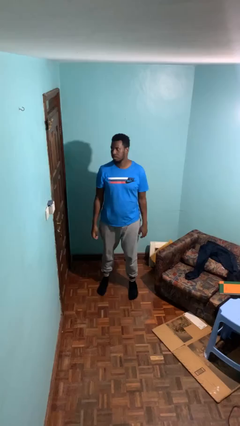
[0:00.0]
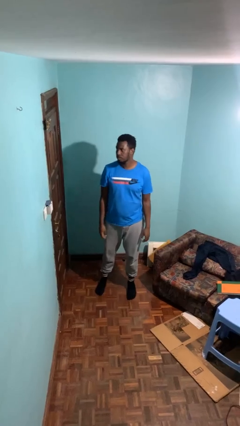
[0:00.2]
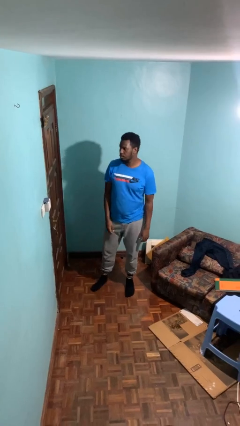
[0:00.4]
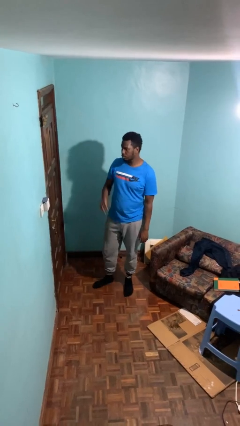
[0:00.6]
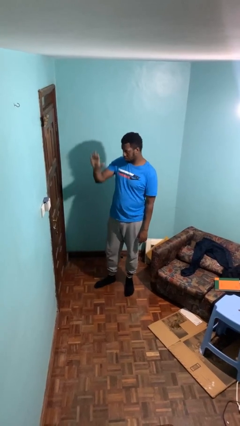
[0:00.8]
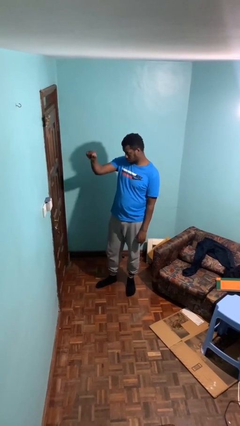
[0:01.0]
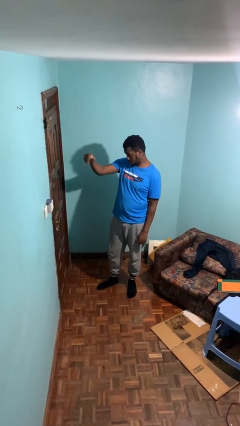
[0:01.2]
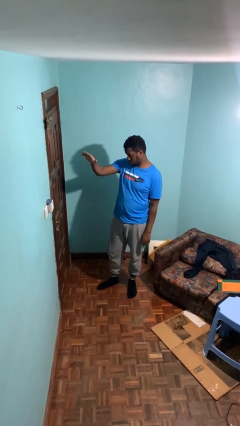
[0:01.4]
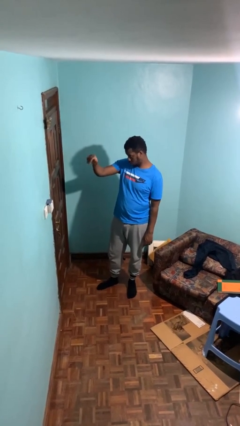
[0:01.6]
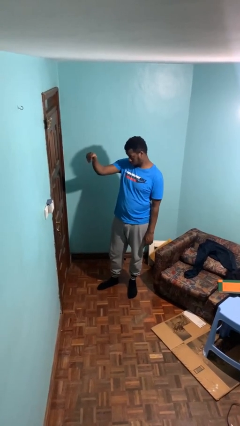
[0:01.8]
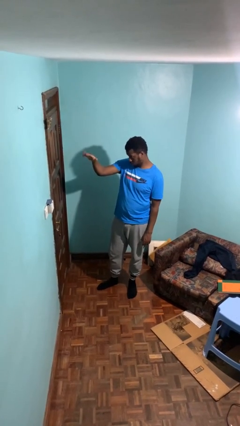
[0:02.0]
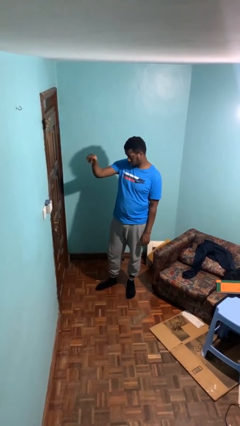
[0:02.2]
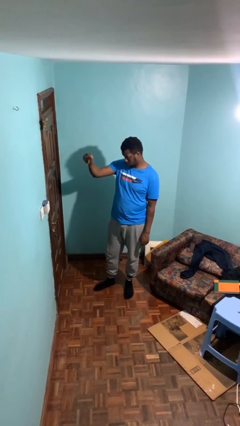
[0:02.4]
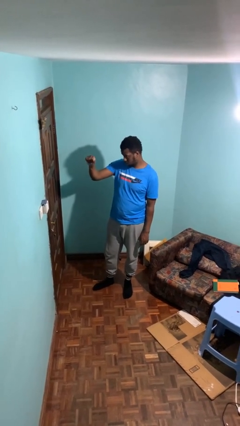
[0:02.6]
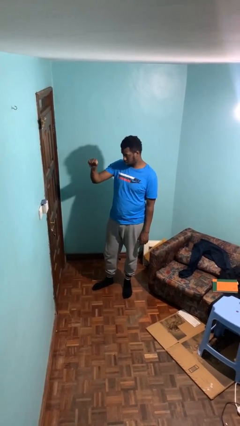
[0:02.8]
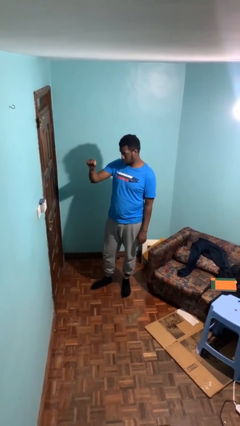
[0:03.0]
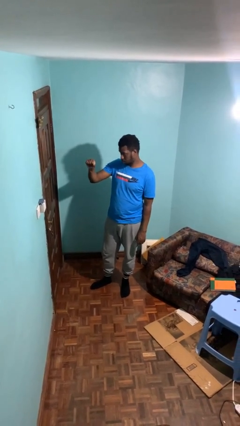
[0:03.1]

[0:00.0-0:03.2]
person gestures come here

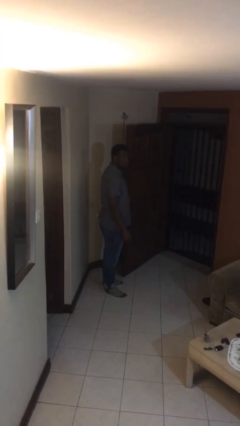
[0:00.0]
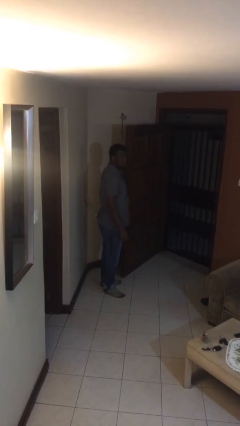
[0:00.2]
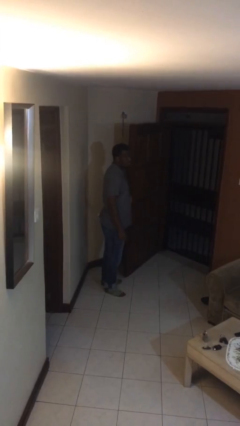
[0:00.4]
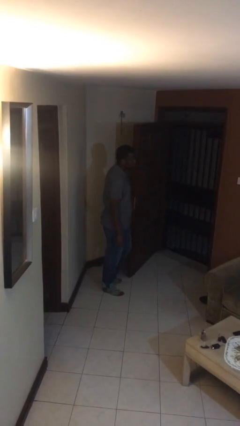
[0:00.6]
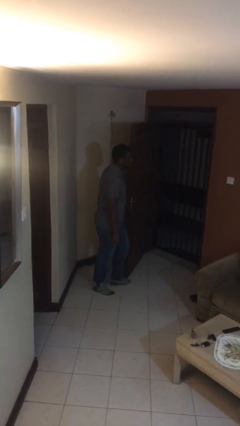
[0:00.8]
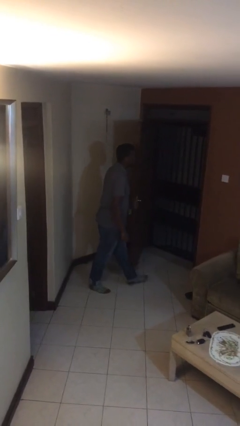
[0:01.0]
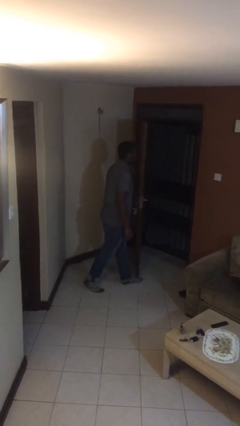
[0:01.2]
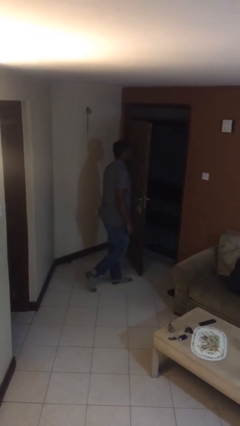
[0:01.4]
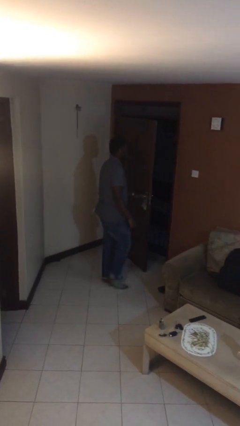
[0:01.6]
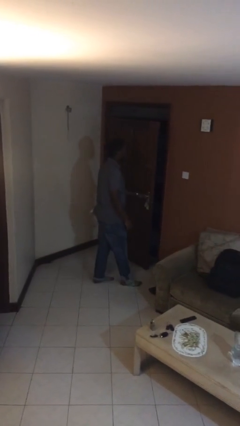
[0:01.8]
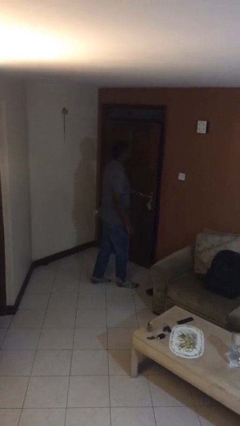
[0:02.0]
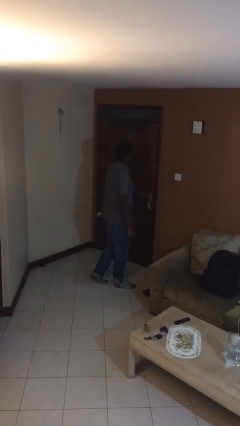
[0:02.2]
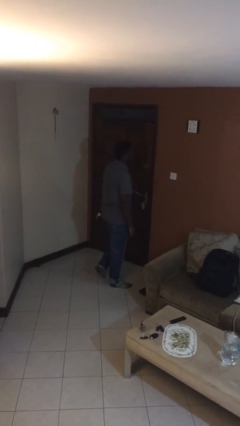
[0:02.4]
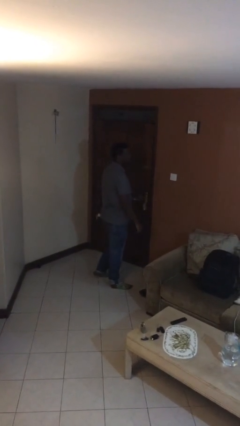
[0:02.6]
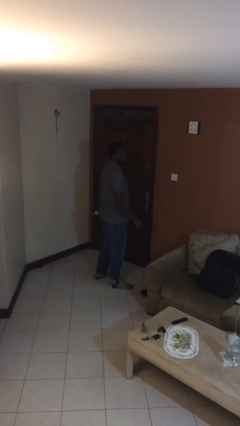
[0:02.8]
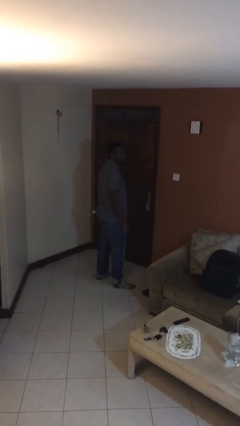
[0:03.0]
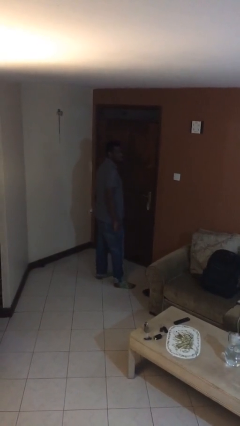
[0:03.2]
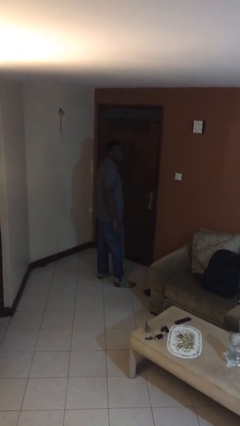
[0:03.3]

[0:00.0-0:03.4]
person closes facility door

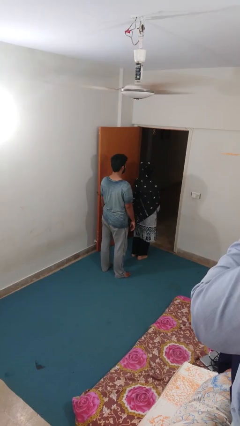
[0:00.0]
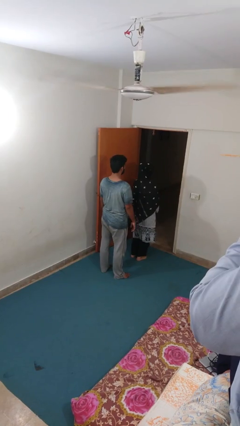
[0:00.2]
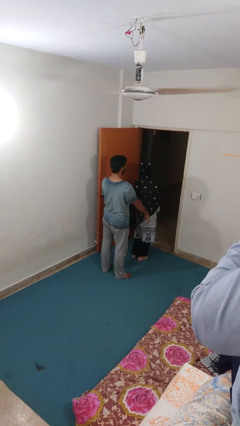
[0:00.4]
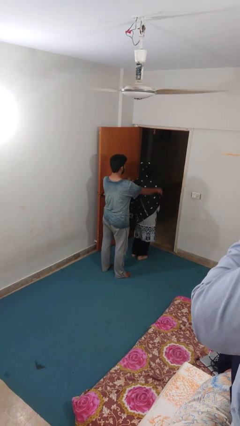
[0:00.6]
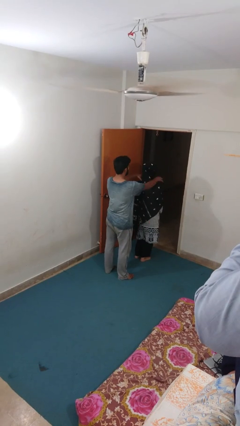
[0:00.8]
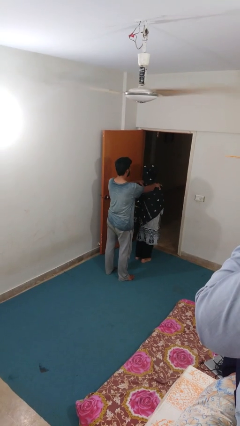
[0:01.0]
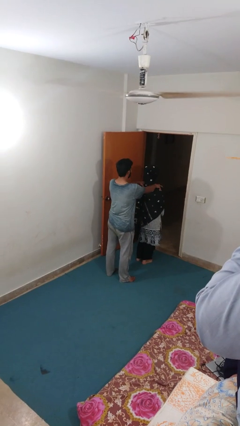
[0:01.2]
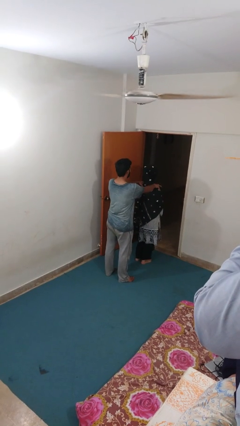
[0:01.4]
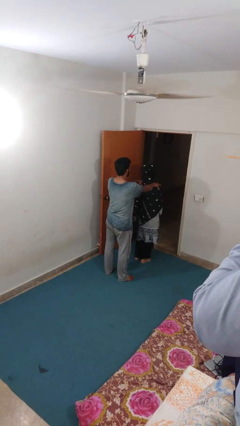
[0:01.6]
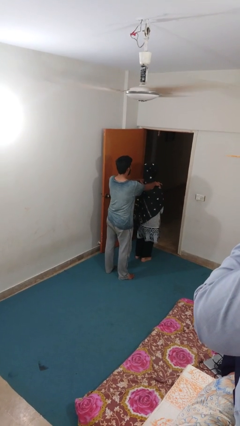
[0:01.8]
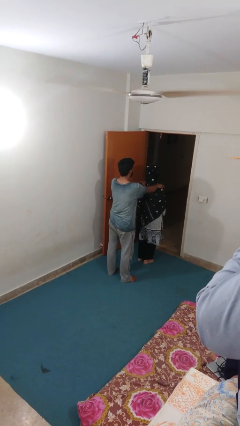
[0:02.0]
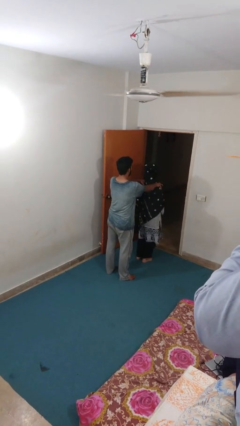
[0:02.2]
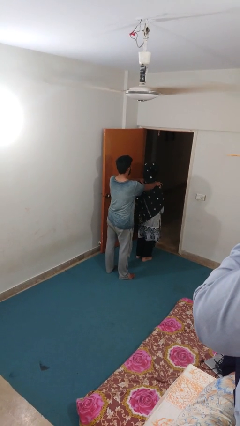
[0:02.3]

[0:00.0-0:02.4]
person grabs person by shoulder

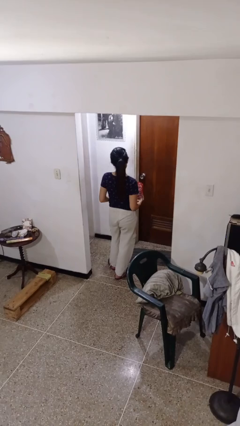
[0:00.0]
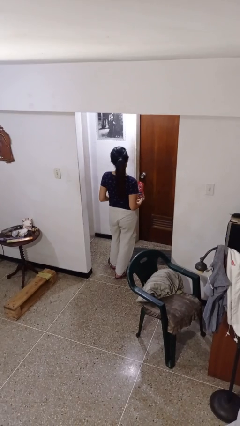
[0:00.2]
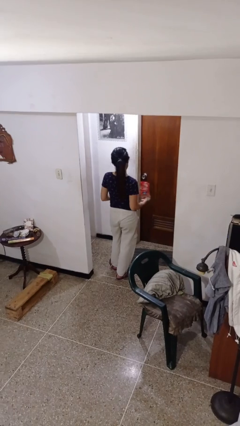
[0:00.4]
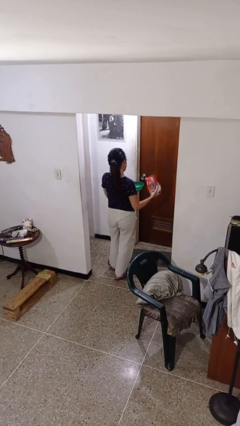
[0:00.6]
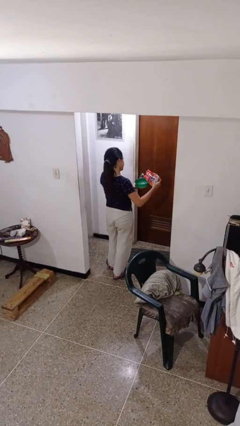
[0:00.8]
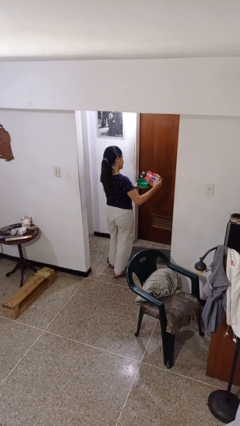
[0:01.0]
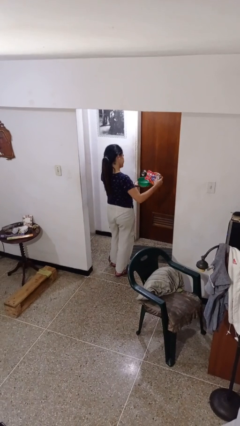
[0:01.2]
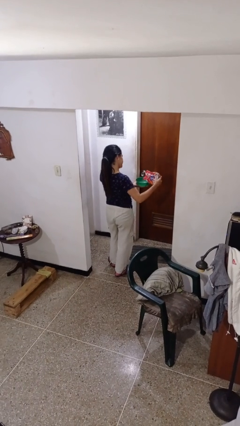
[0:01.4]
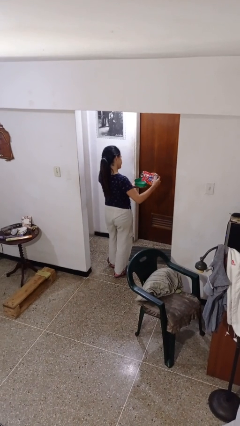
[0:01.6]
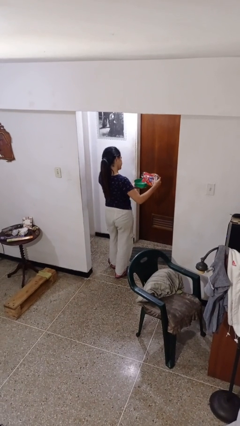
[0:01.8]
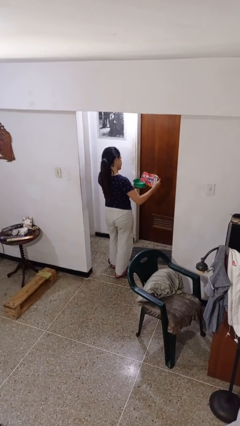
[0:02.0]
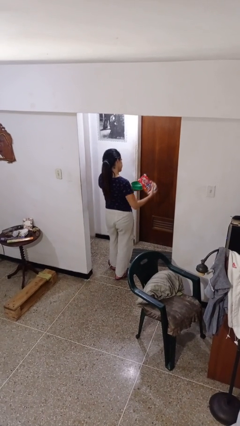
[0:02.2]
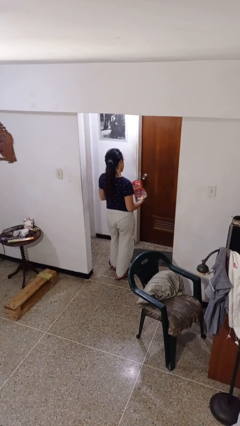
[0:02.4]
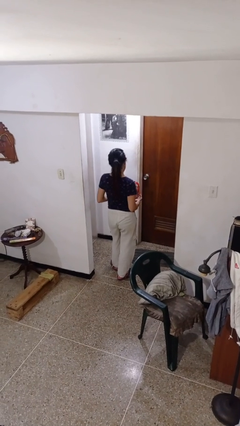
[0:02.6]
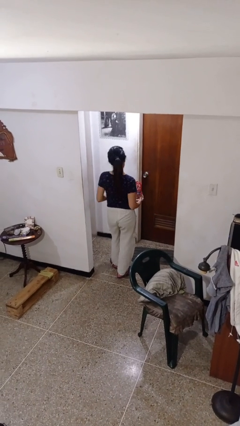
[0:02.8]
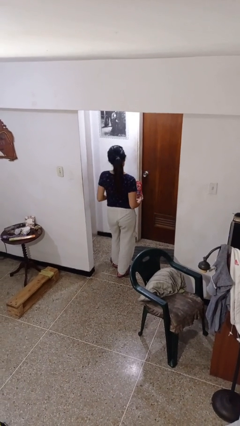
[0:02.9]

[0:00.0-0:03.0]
person pours into bowl

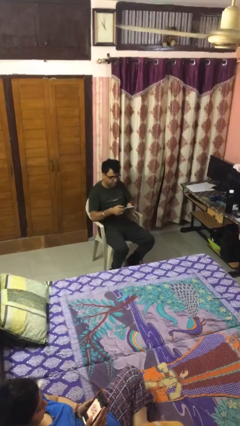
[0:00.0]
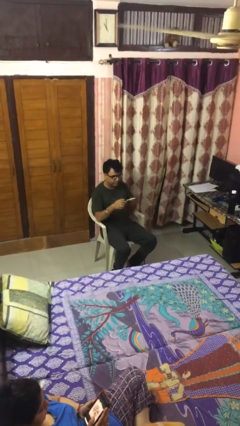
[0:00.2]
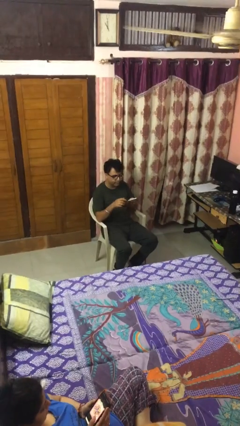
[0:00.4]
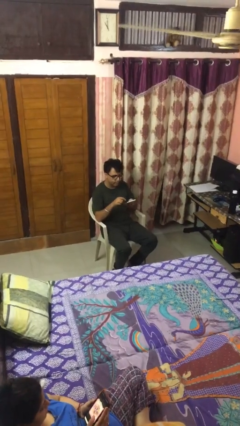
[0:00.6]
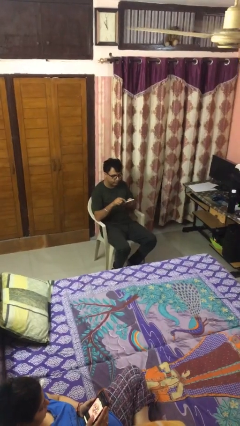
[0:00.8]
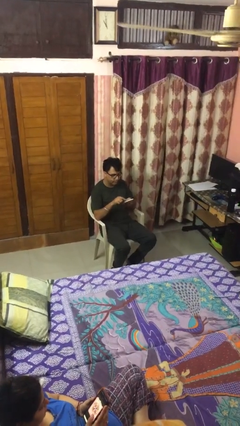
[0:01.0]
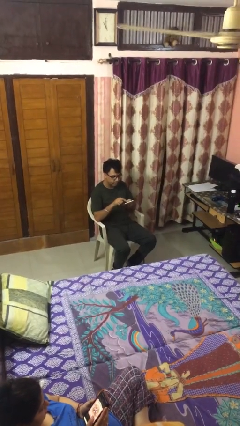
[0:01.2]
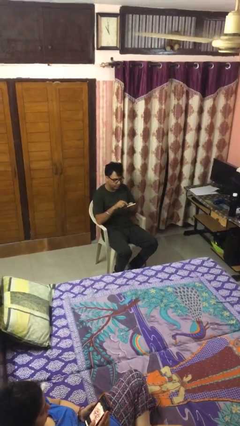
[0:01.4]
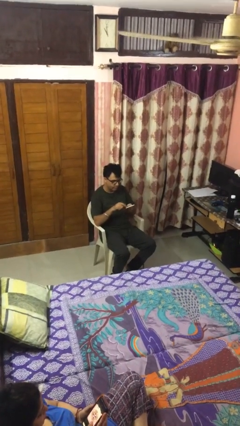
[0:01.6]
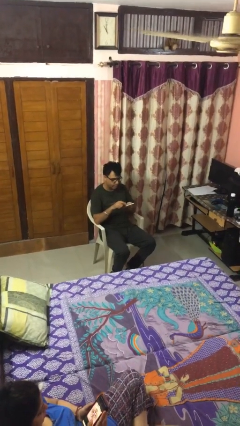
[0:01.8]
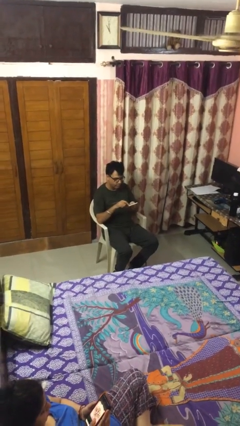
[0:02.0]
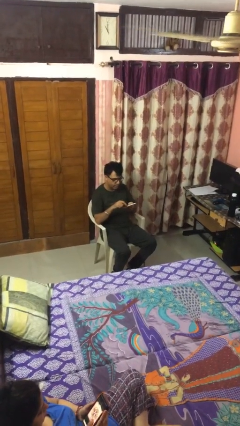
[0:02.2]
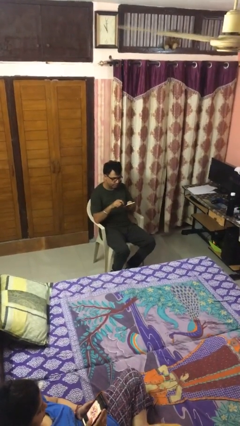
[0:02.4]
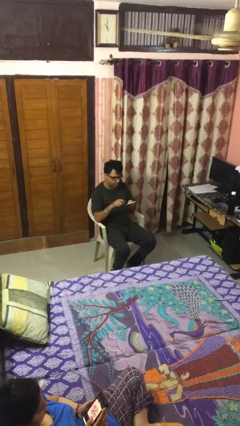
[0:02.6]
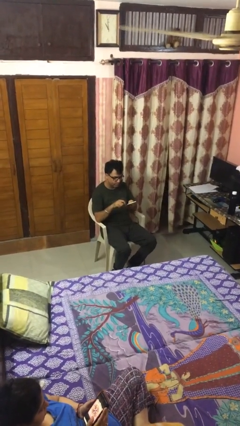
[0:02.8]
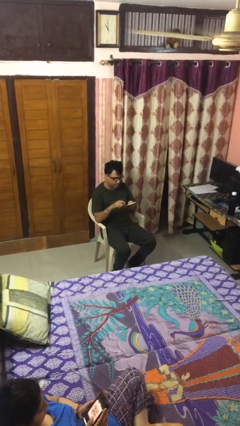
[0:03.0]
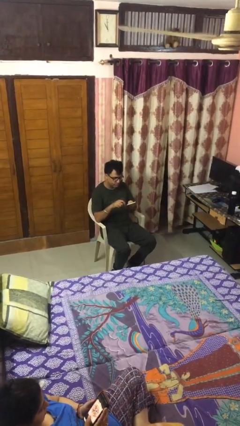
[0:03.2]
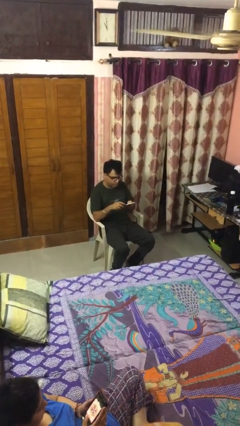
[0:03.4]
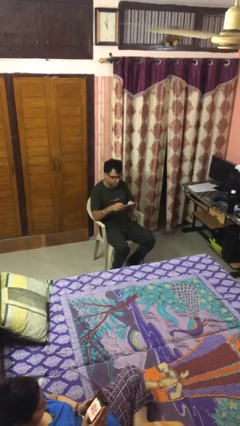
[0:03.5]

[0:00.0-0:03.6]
person interacts with tablet

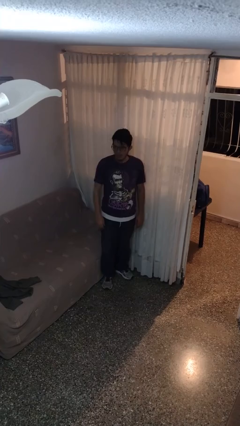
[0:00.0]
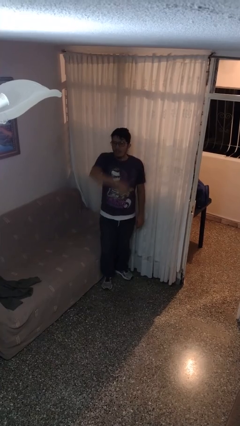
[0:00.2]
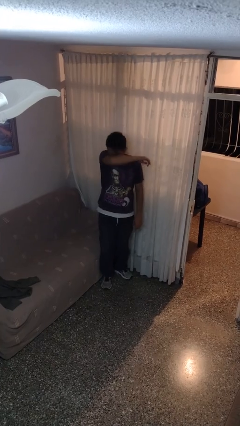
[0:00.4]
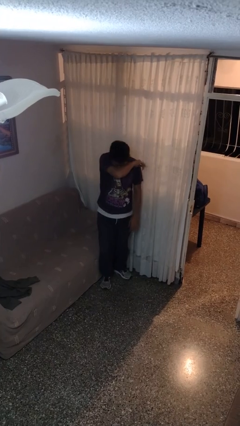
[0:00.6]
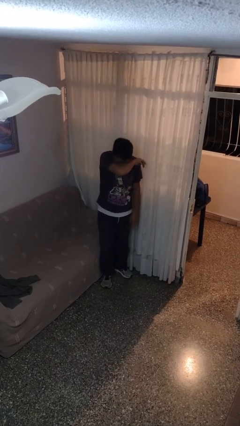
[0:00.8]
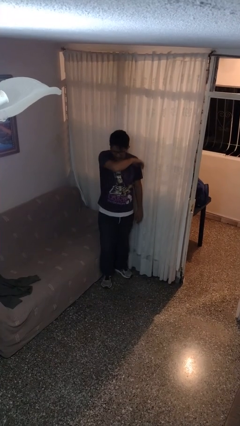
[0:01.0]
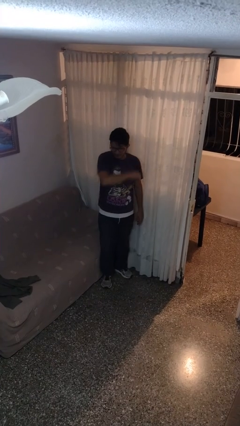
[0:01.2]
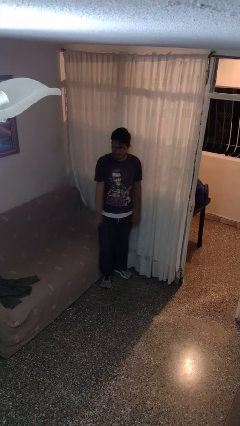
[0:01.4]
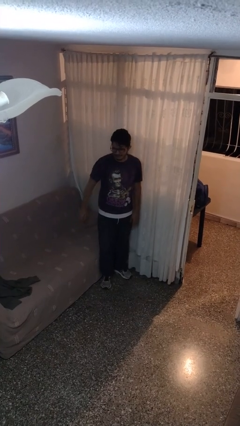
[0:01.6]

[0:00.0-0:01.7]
person sneezes into arm

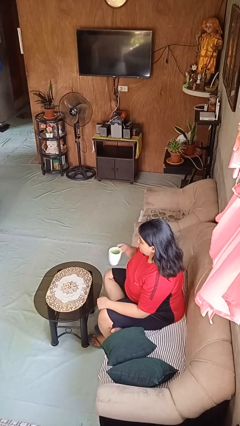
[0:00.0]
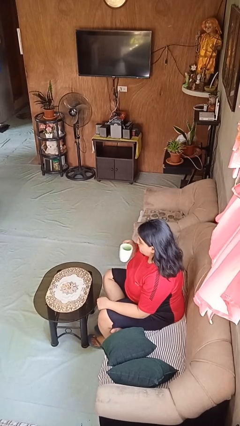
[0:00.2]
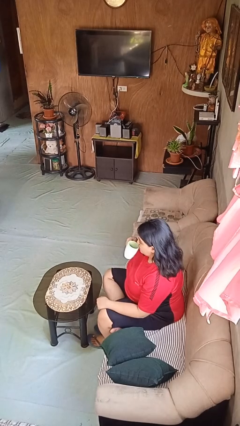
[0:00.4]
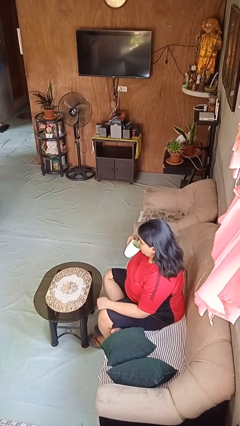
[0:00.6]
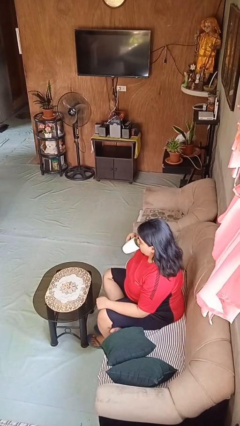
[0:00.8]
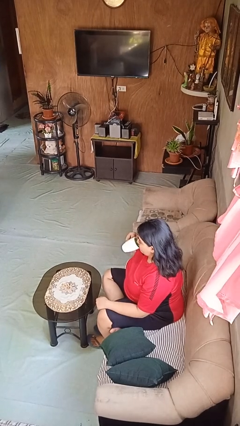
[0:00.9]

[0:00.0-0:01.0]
person drinks from mug
